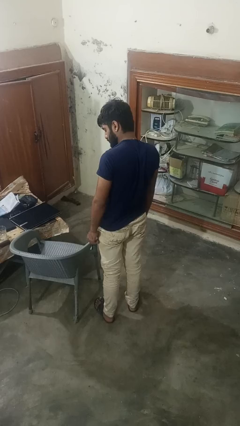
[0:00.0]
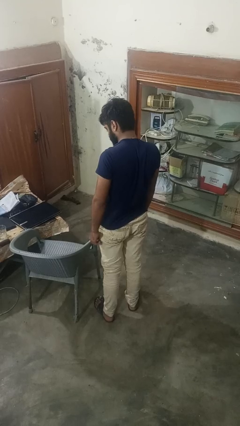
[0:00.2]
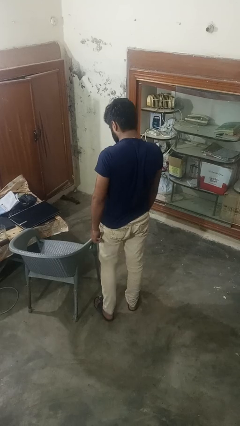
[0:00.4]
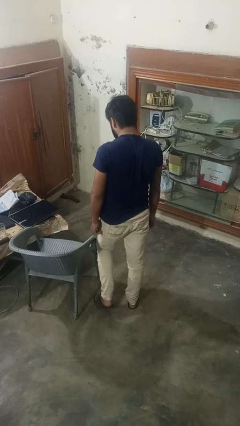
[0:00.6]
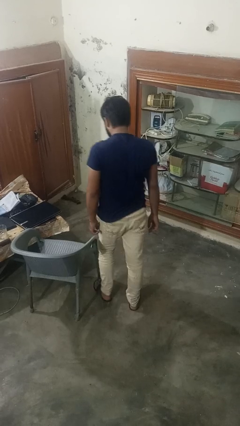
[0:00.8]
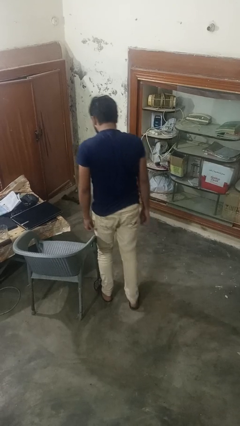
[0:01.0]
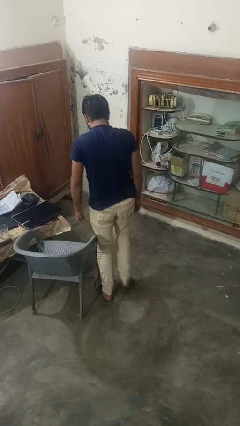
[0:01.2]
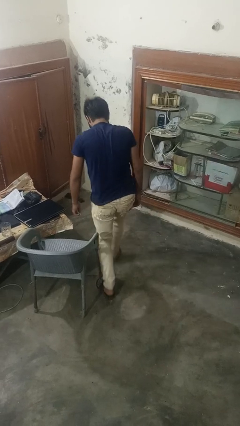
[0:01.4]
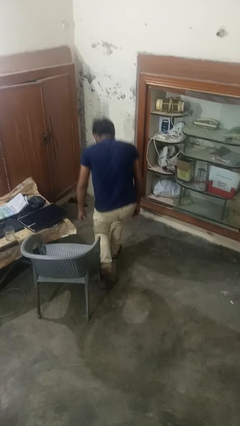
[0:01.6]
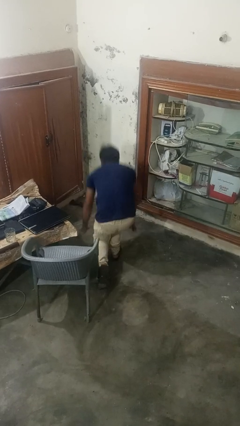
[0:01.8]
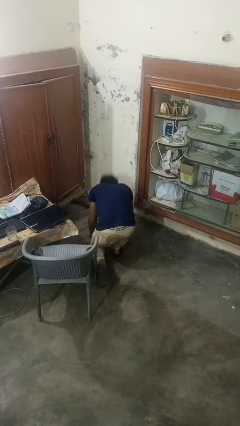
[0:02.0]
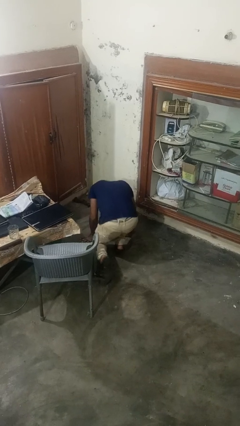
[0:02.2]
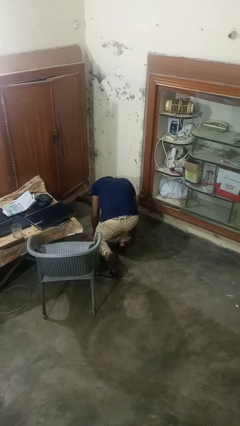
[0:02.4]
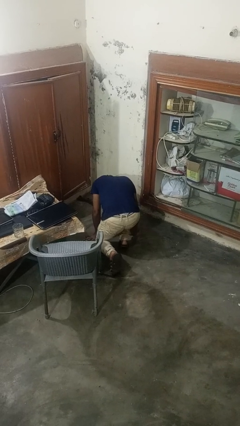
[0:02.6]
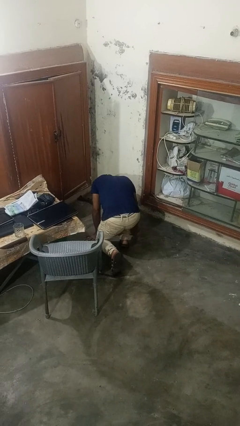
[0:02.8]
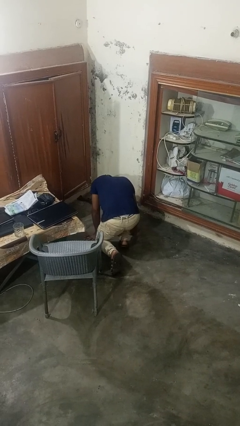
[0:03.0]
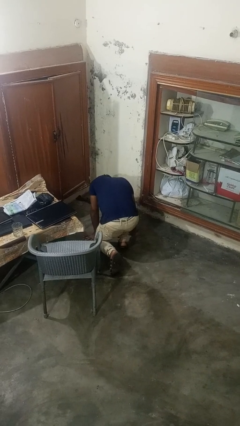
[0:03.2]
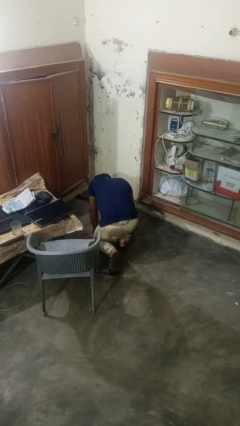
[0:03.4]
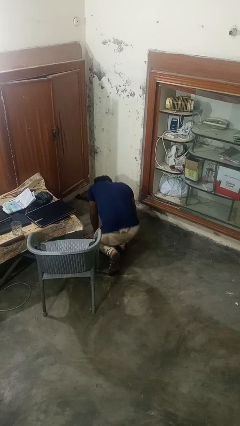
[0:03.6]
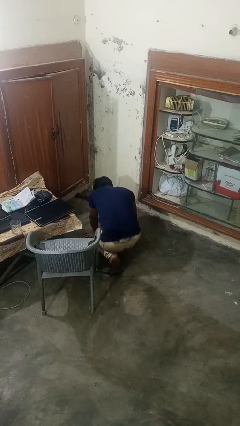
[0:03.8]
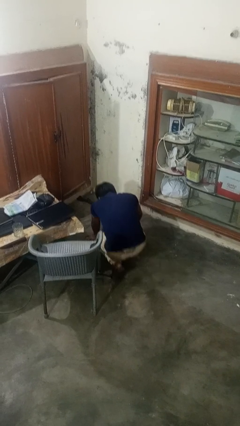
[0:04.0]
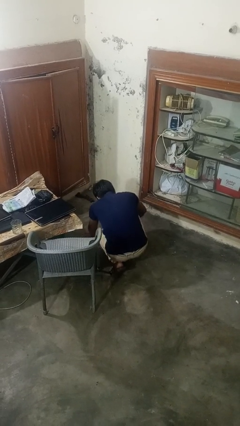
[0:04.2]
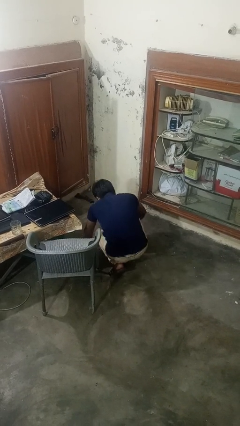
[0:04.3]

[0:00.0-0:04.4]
person trips on object on floor

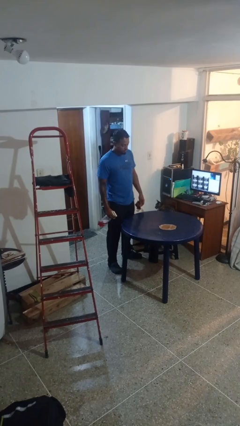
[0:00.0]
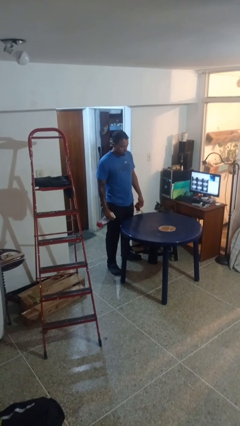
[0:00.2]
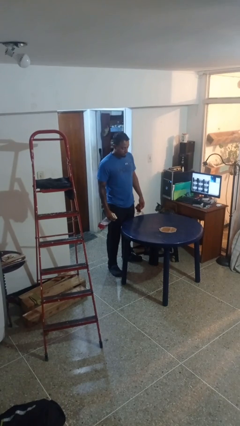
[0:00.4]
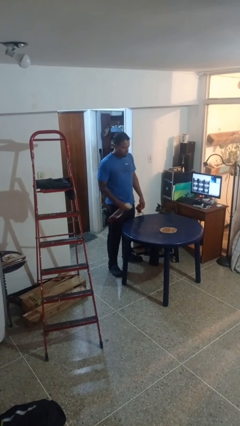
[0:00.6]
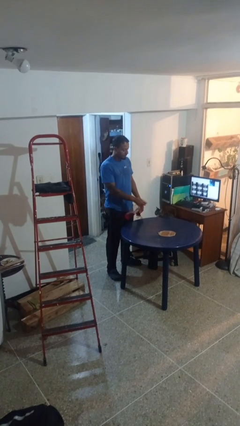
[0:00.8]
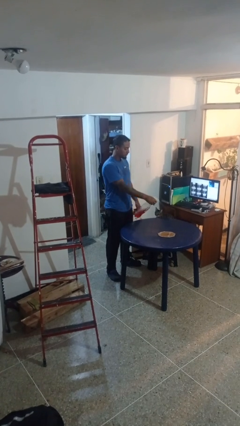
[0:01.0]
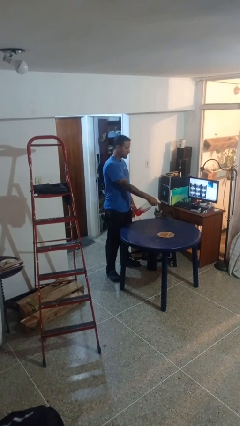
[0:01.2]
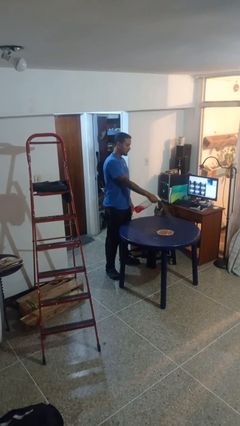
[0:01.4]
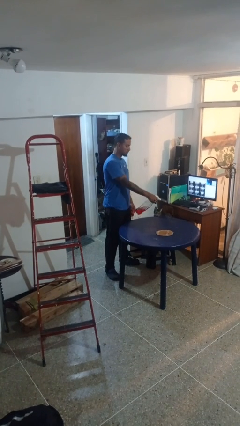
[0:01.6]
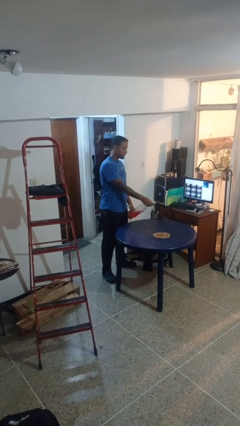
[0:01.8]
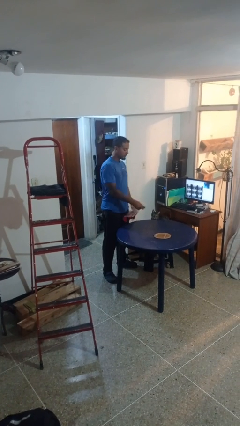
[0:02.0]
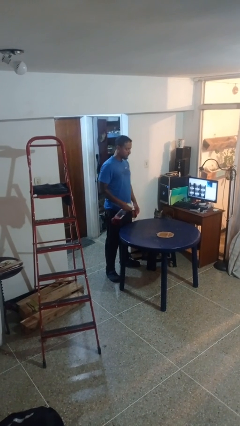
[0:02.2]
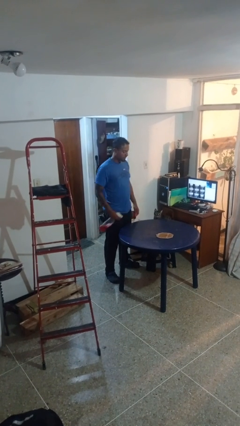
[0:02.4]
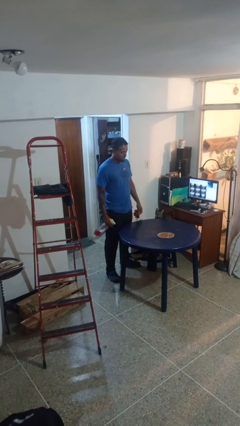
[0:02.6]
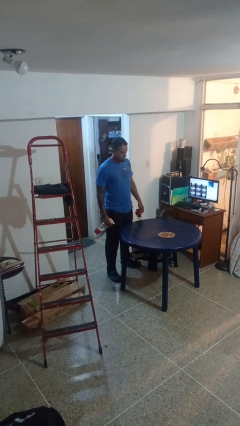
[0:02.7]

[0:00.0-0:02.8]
person sprays from bottle

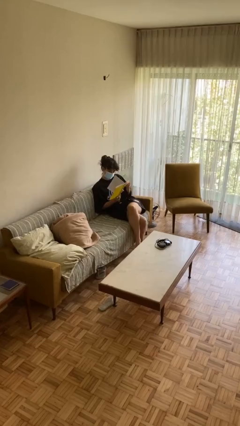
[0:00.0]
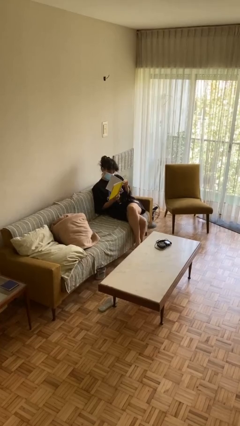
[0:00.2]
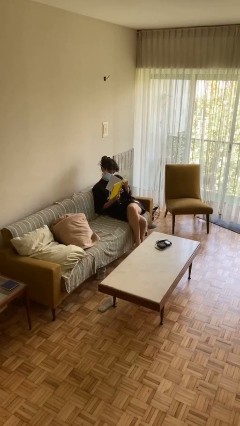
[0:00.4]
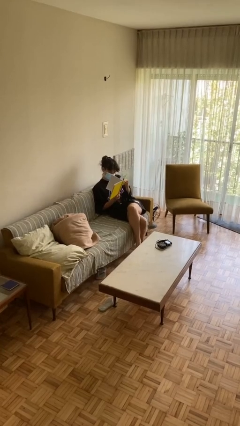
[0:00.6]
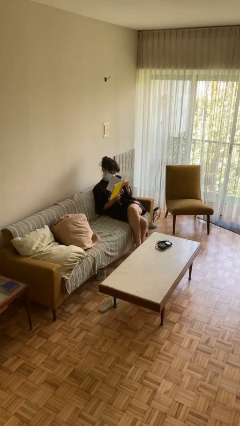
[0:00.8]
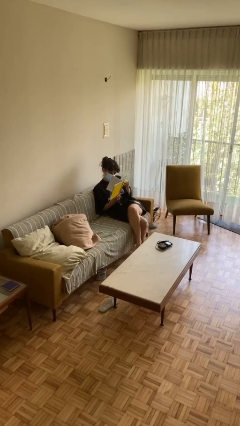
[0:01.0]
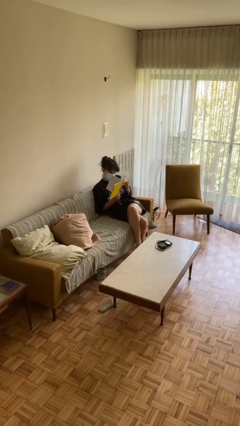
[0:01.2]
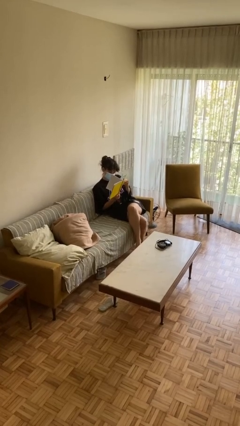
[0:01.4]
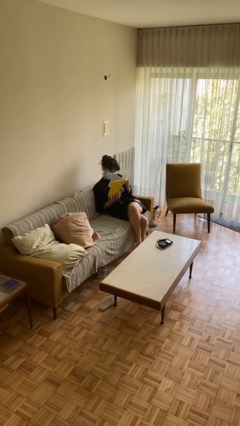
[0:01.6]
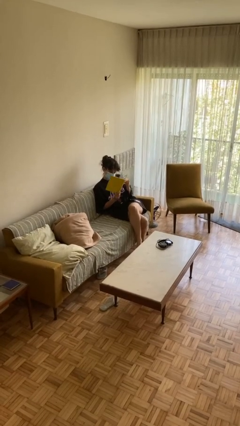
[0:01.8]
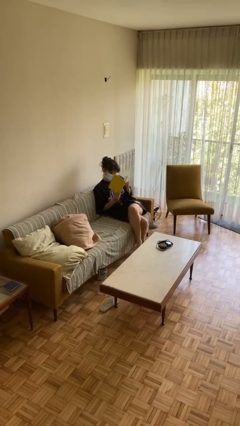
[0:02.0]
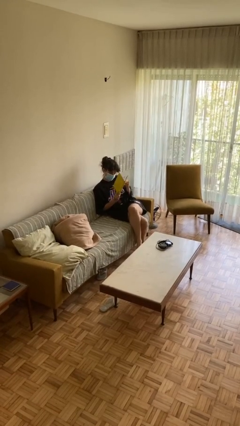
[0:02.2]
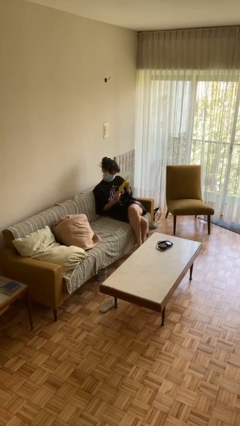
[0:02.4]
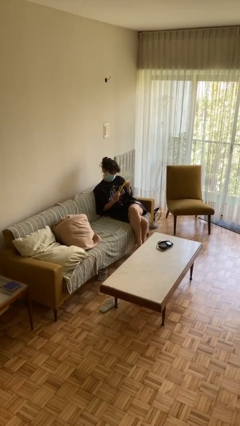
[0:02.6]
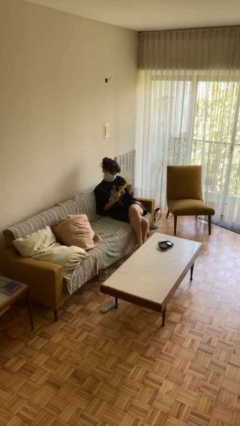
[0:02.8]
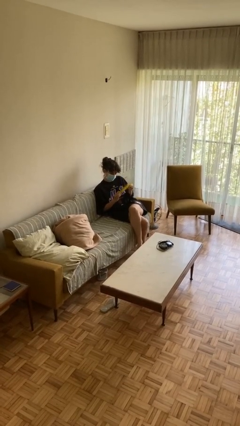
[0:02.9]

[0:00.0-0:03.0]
person reads document

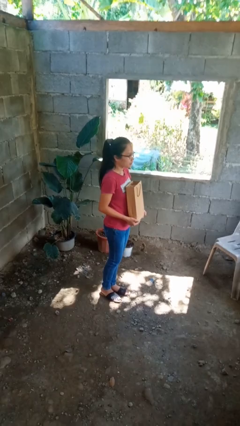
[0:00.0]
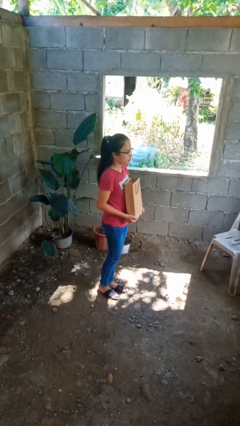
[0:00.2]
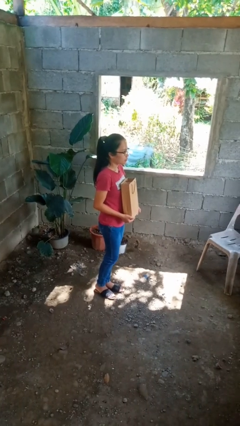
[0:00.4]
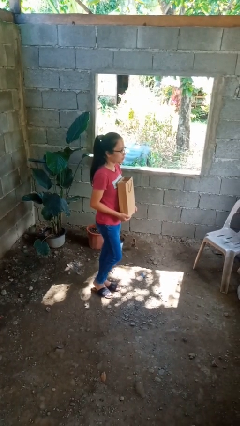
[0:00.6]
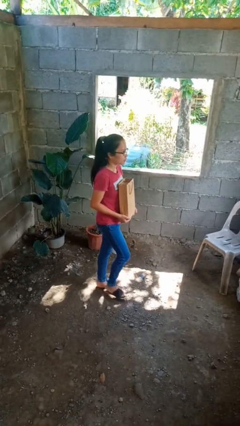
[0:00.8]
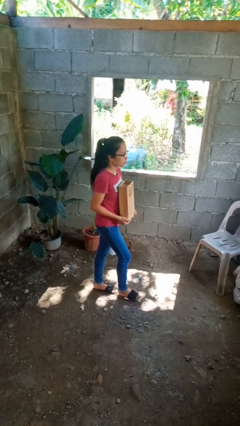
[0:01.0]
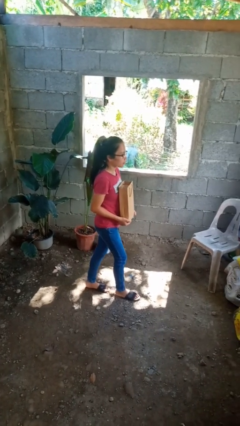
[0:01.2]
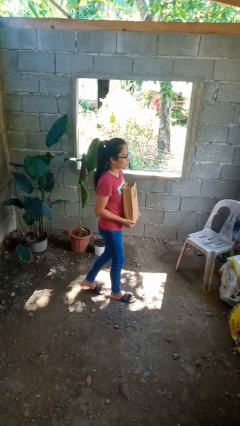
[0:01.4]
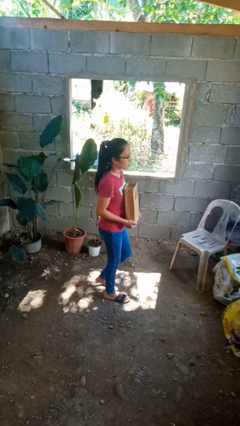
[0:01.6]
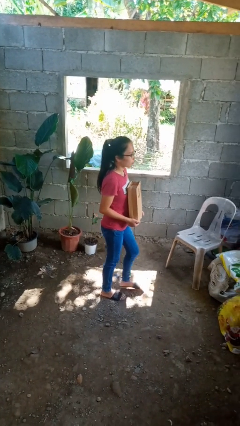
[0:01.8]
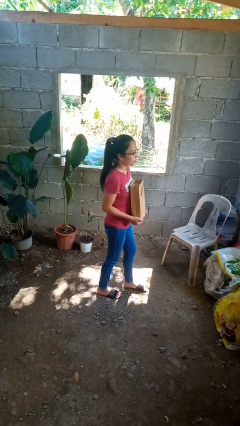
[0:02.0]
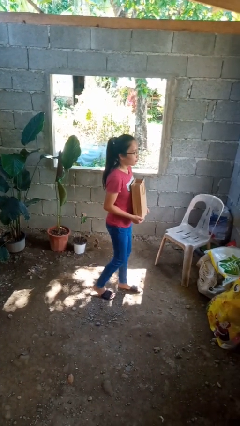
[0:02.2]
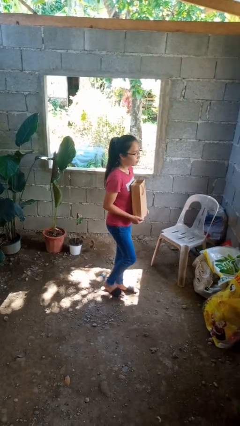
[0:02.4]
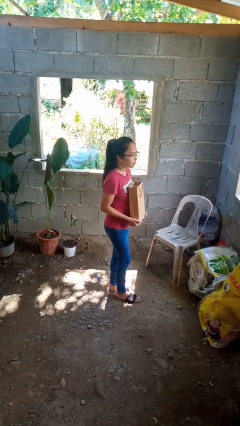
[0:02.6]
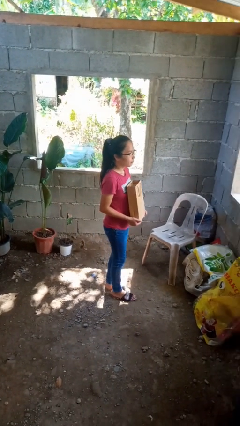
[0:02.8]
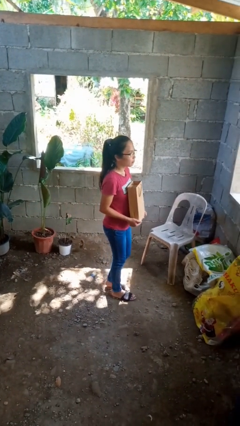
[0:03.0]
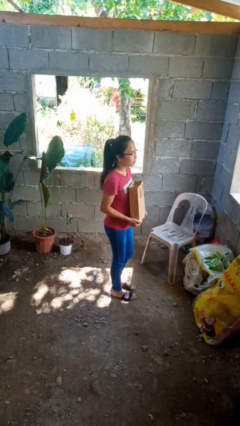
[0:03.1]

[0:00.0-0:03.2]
person carries groceries

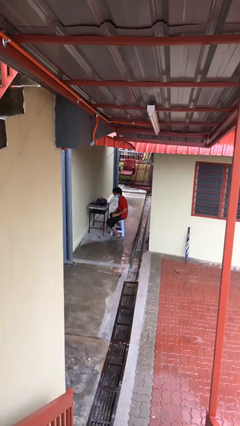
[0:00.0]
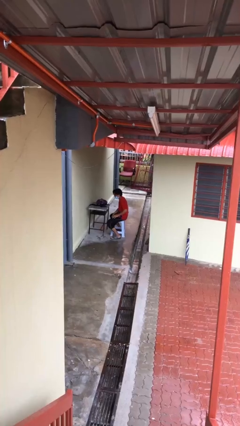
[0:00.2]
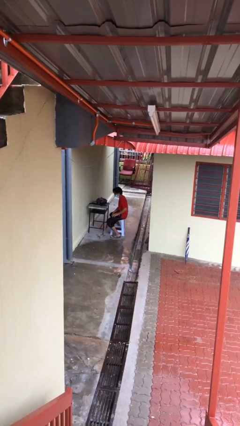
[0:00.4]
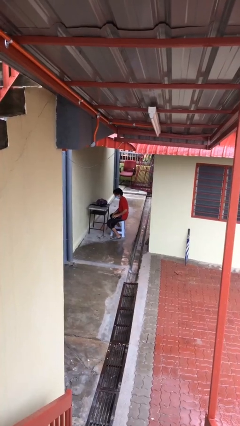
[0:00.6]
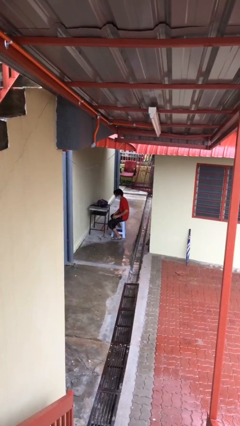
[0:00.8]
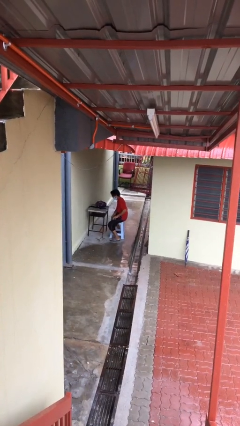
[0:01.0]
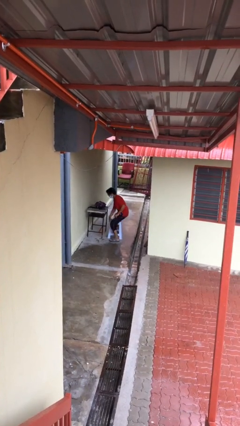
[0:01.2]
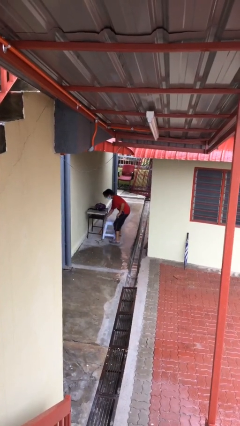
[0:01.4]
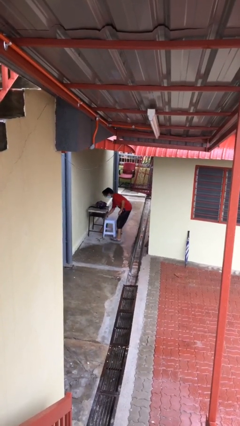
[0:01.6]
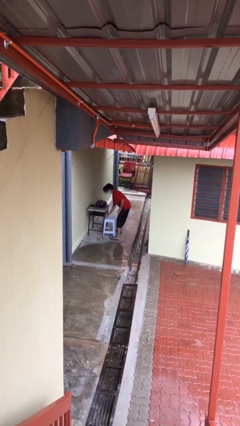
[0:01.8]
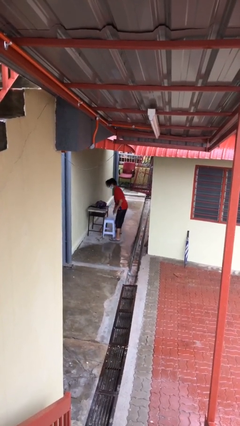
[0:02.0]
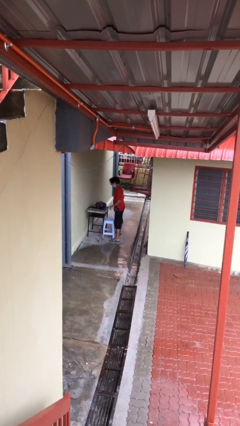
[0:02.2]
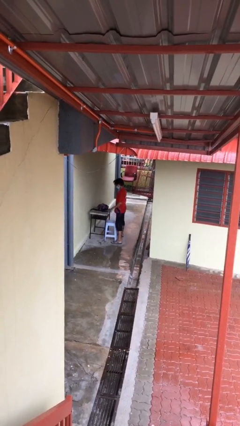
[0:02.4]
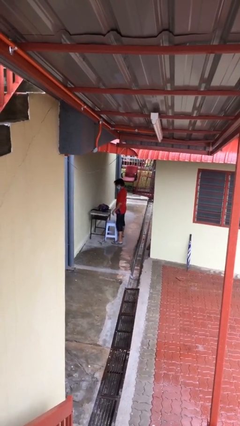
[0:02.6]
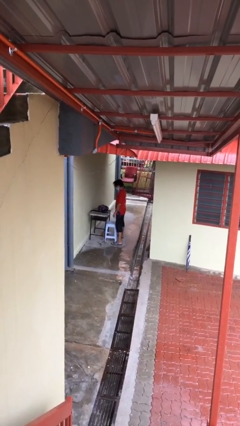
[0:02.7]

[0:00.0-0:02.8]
person stands up

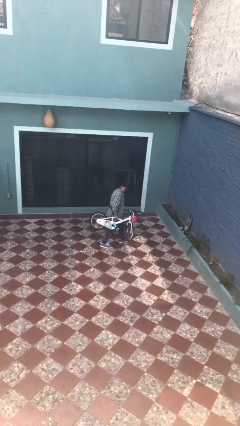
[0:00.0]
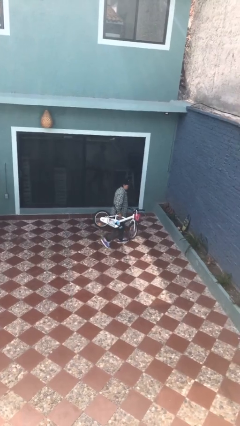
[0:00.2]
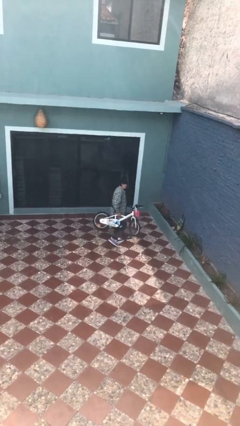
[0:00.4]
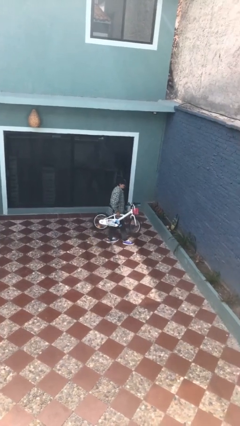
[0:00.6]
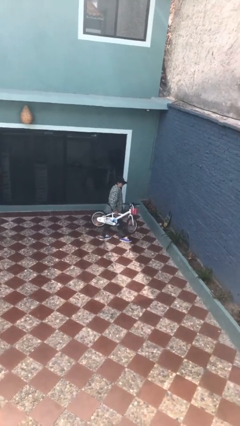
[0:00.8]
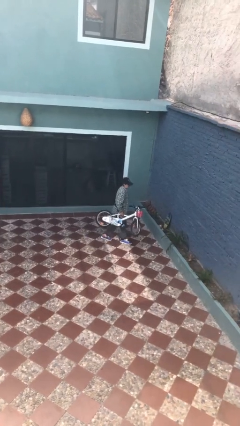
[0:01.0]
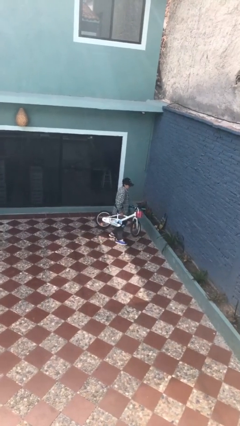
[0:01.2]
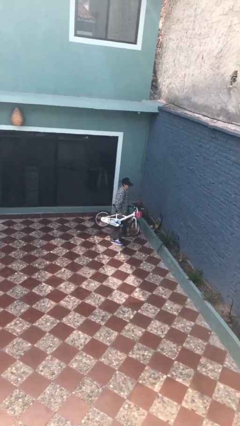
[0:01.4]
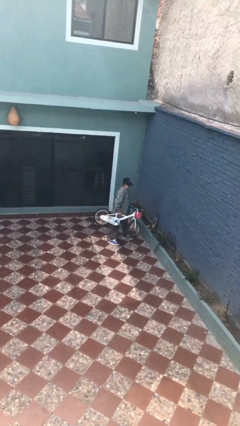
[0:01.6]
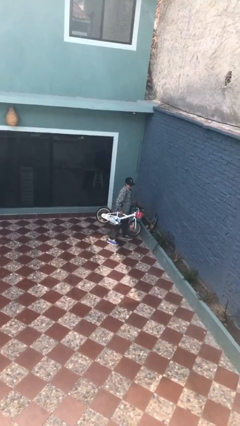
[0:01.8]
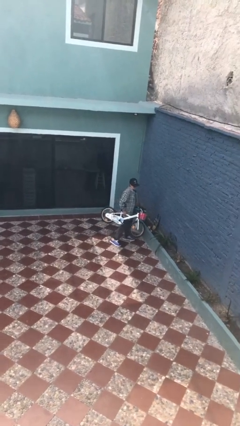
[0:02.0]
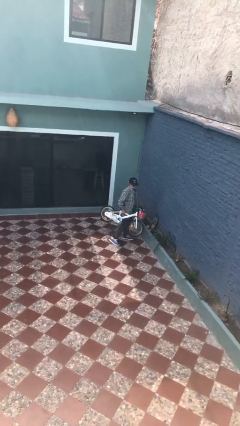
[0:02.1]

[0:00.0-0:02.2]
person carries bicycle
